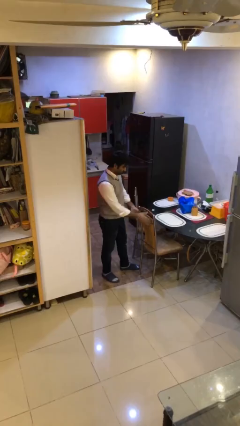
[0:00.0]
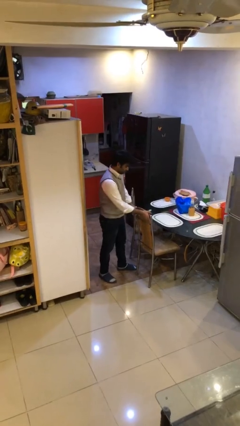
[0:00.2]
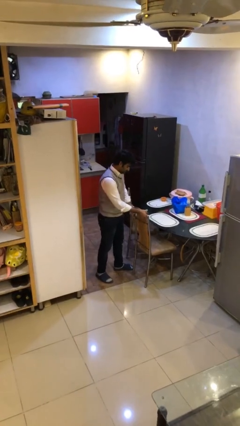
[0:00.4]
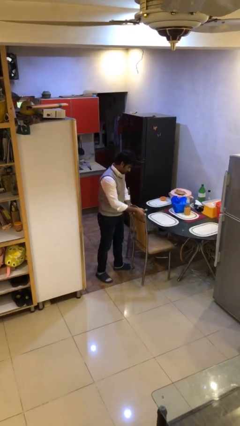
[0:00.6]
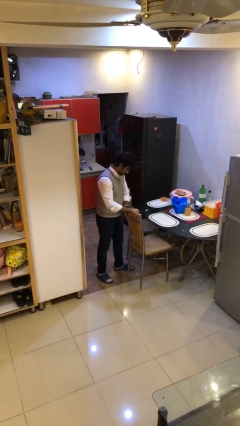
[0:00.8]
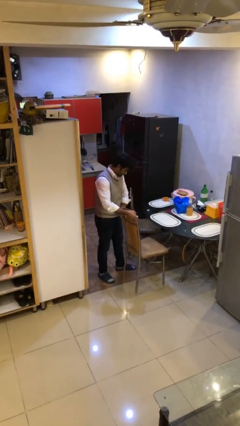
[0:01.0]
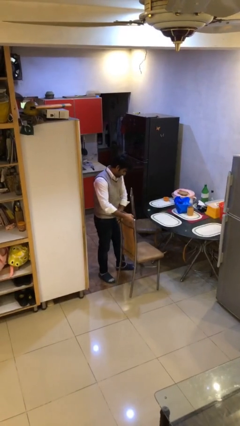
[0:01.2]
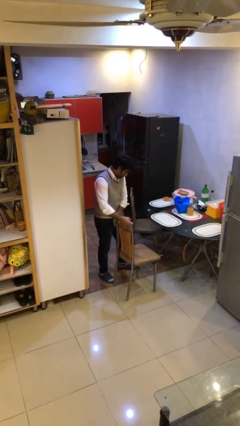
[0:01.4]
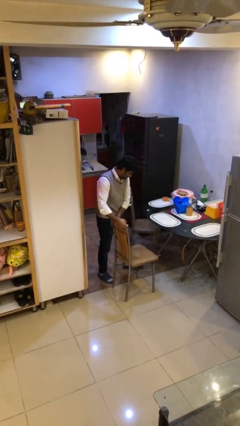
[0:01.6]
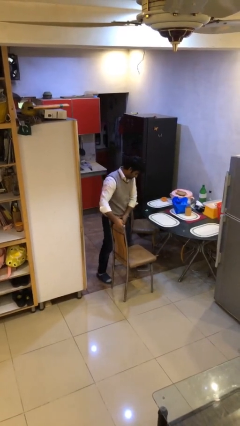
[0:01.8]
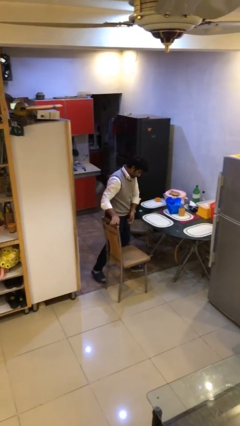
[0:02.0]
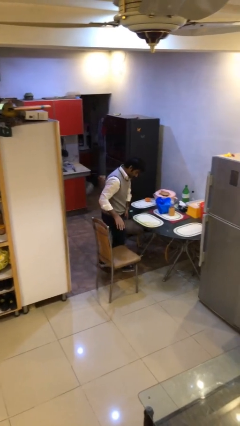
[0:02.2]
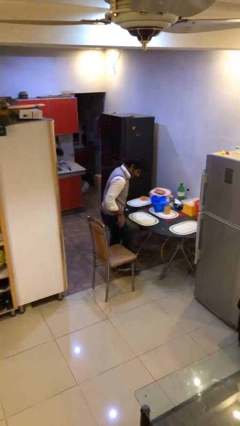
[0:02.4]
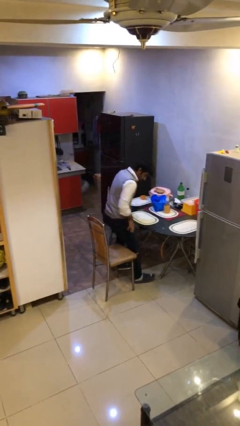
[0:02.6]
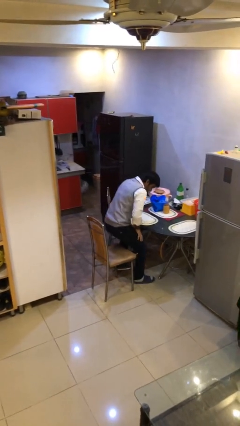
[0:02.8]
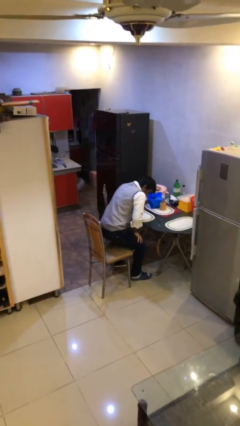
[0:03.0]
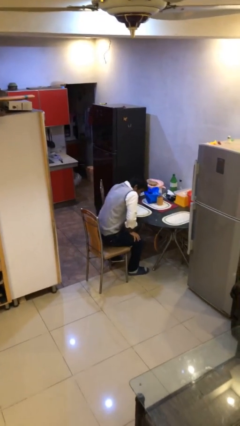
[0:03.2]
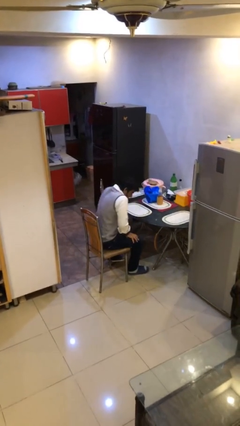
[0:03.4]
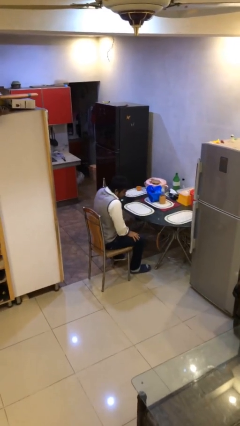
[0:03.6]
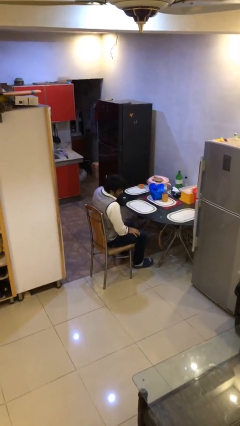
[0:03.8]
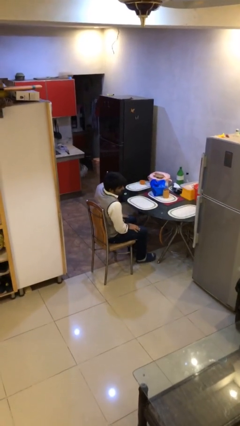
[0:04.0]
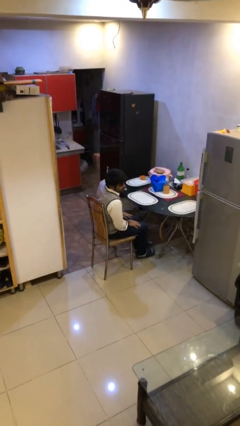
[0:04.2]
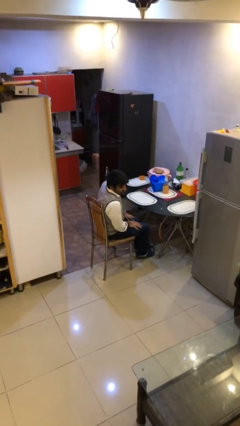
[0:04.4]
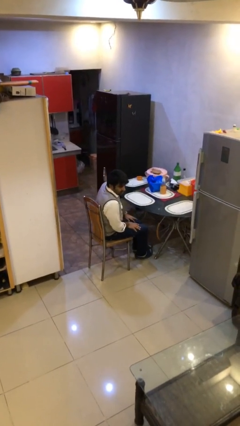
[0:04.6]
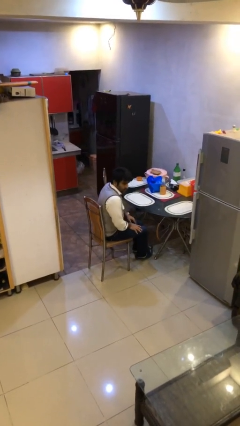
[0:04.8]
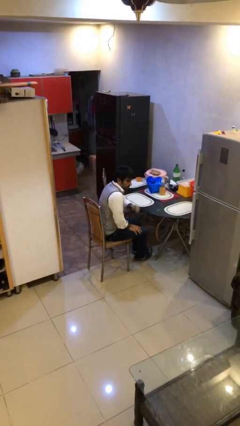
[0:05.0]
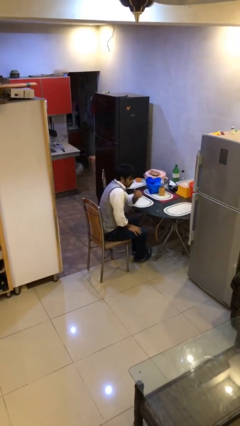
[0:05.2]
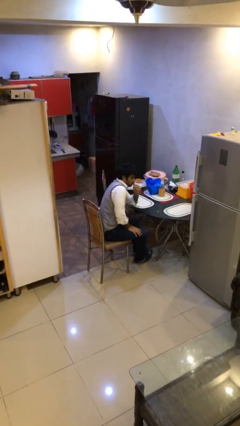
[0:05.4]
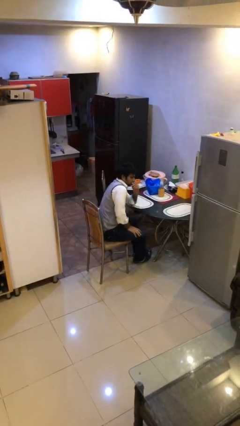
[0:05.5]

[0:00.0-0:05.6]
person sits down

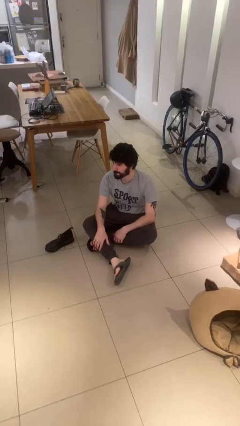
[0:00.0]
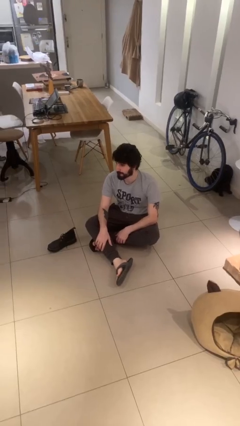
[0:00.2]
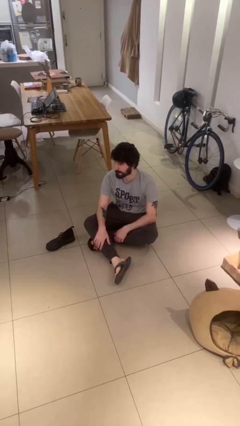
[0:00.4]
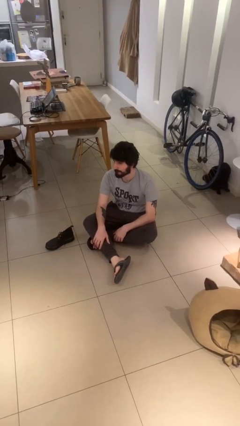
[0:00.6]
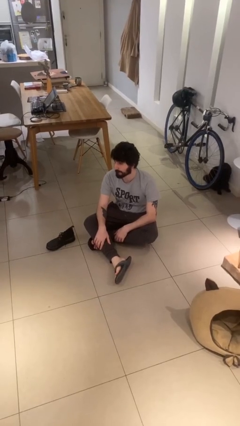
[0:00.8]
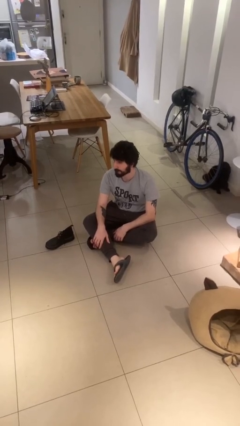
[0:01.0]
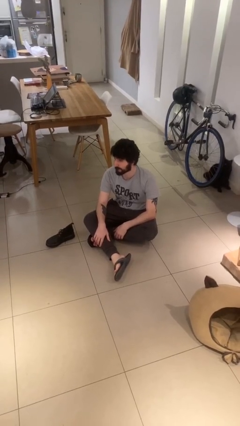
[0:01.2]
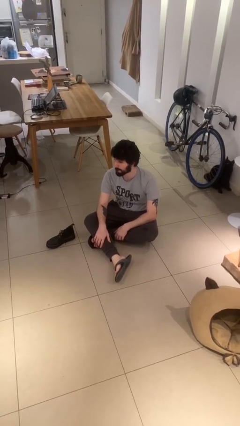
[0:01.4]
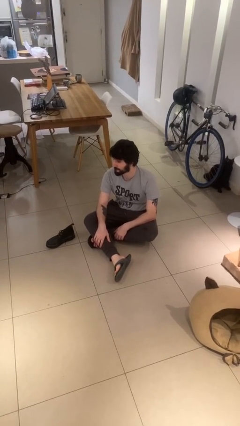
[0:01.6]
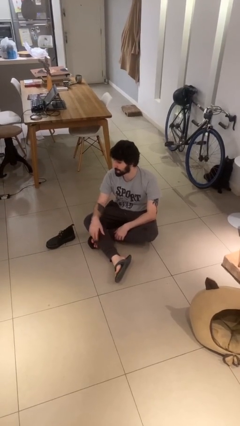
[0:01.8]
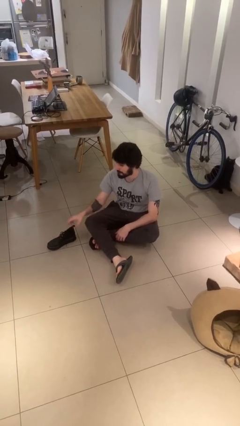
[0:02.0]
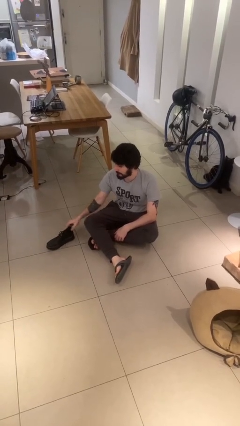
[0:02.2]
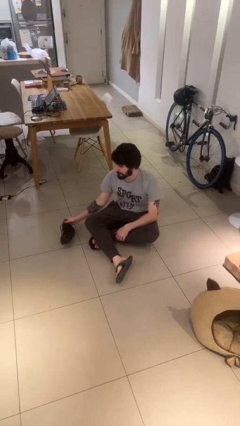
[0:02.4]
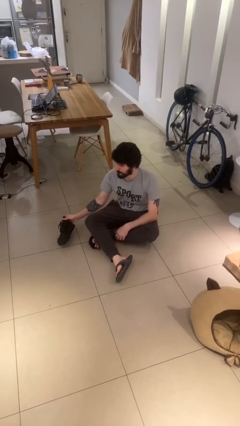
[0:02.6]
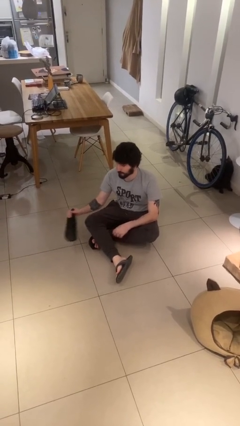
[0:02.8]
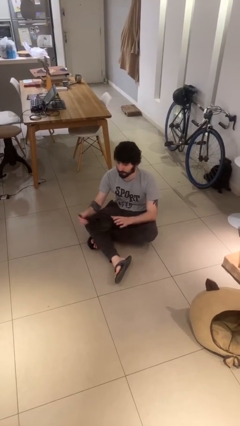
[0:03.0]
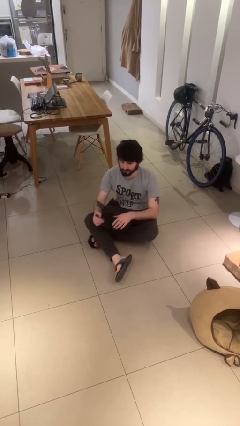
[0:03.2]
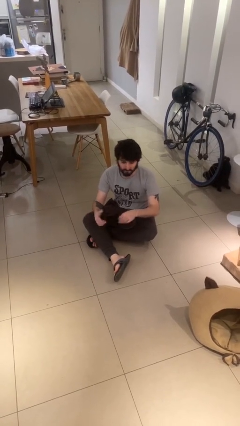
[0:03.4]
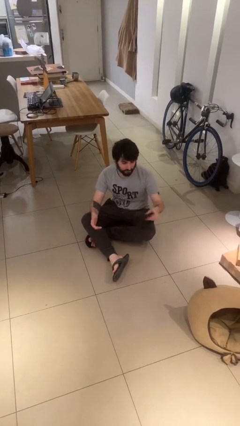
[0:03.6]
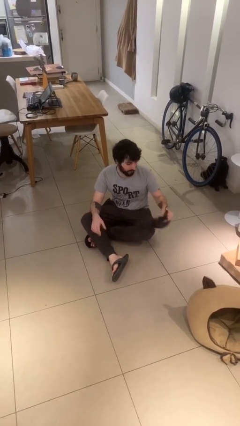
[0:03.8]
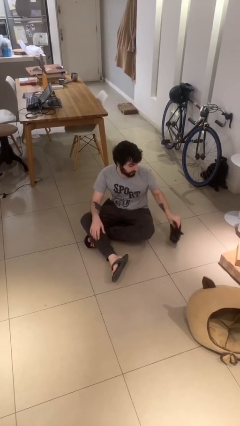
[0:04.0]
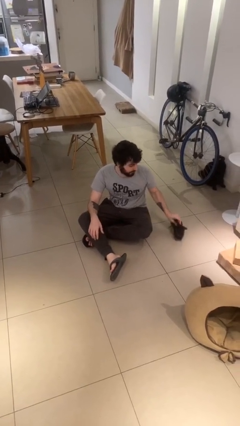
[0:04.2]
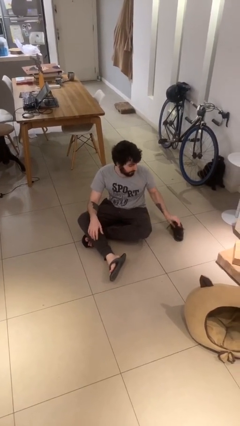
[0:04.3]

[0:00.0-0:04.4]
person picks up object from floor

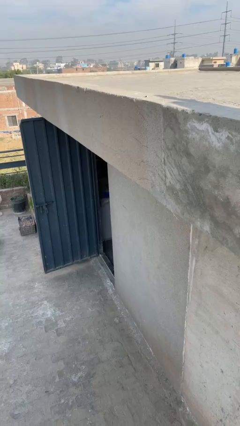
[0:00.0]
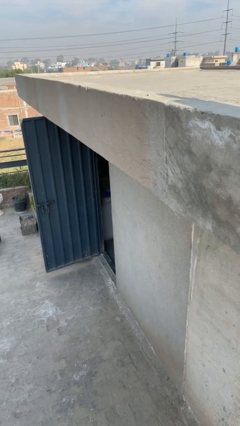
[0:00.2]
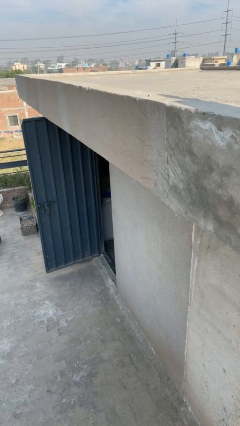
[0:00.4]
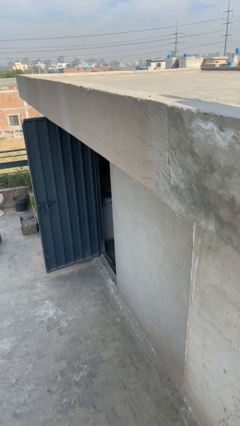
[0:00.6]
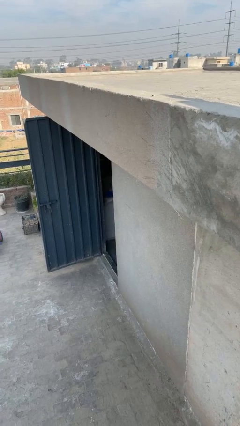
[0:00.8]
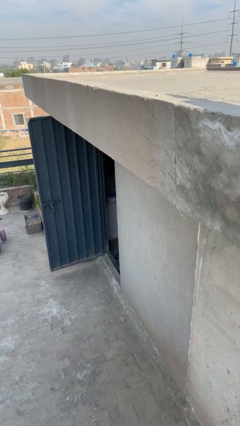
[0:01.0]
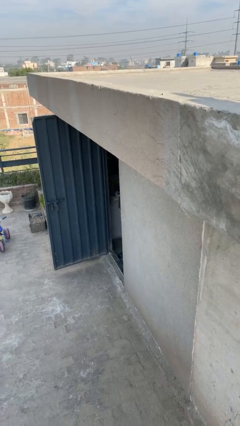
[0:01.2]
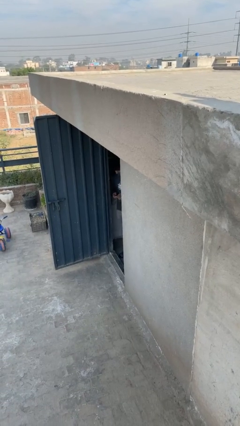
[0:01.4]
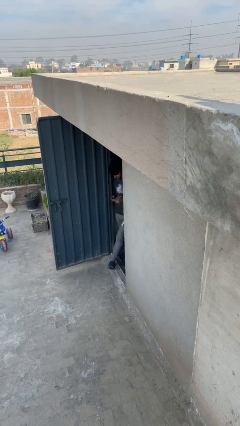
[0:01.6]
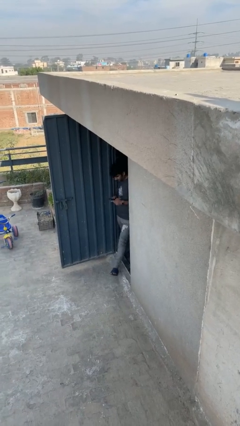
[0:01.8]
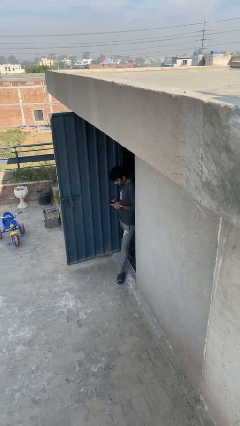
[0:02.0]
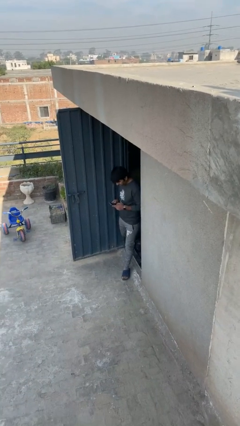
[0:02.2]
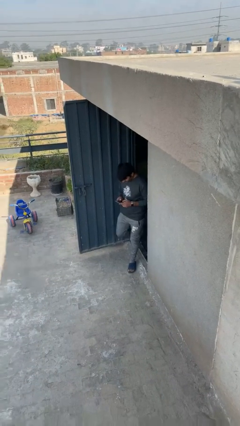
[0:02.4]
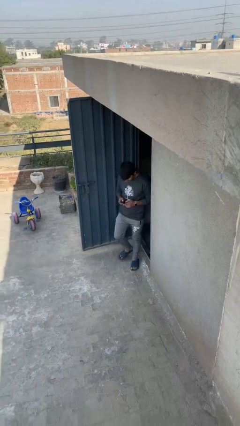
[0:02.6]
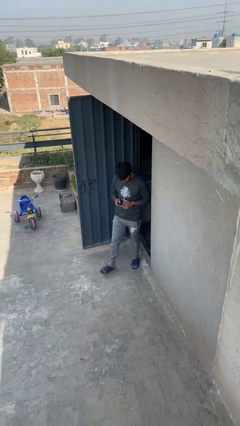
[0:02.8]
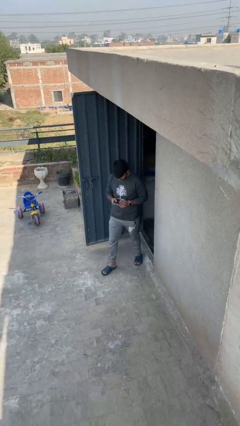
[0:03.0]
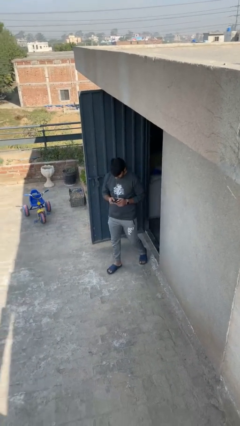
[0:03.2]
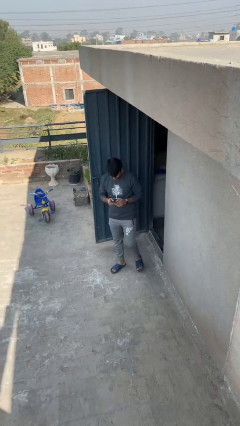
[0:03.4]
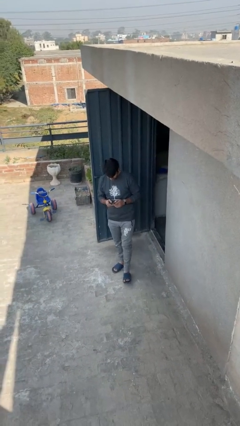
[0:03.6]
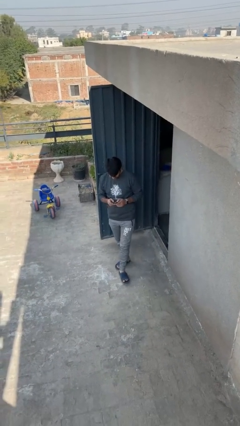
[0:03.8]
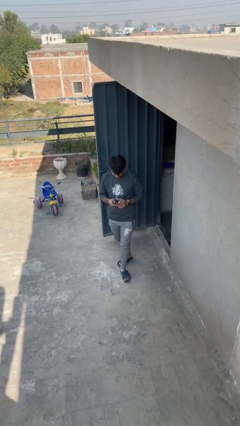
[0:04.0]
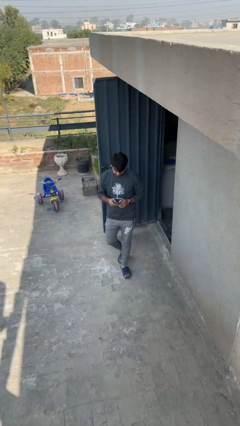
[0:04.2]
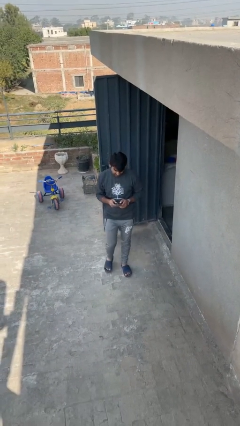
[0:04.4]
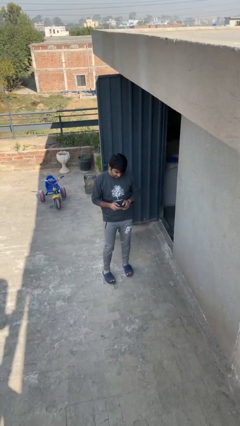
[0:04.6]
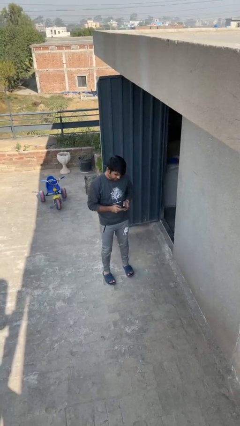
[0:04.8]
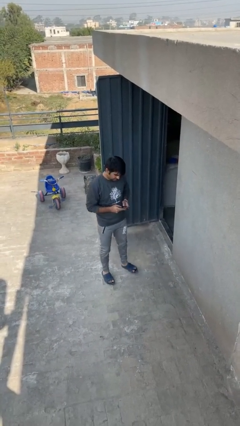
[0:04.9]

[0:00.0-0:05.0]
person enters scene through structure

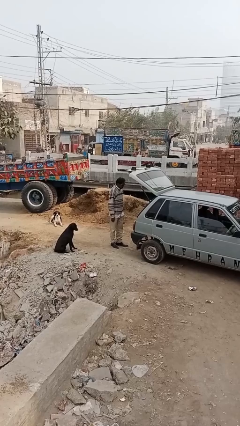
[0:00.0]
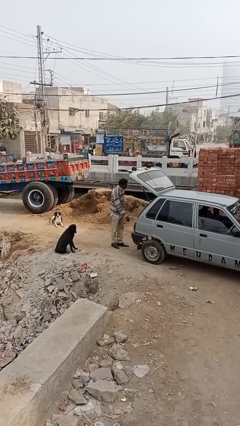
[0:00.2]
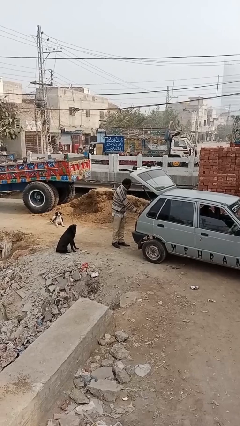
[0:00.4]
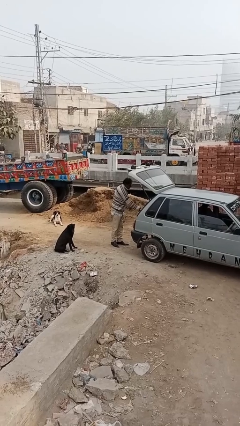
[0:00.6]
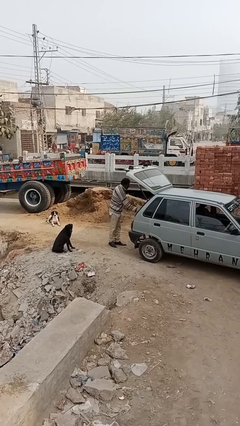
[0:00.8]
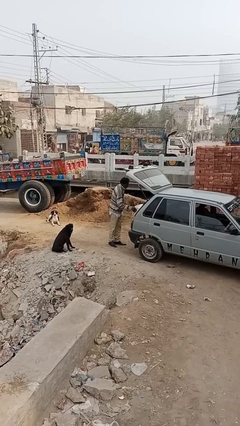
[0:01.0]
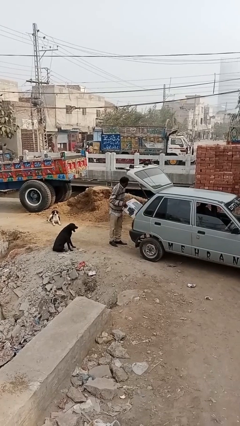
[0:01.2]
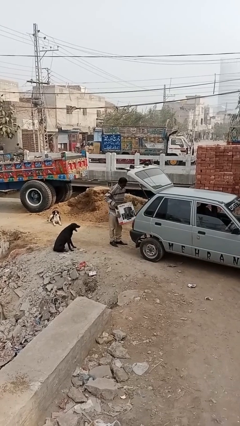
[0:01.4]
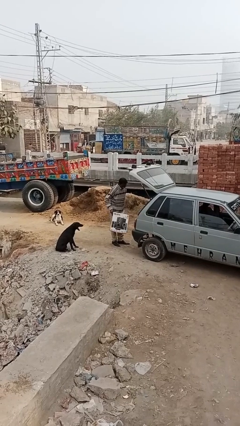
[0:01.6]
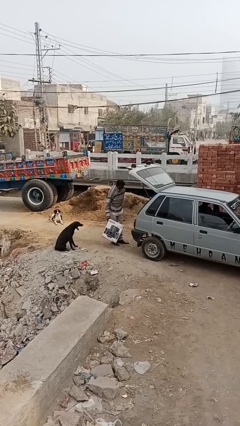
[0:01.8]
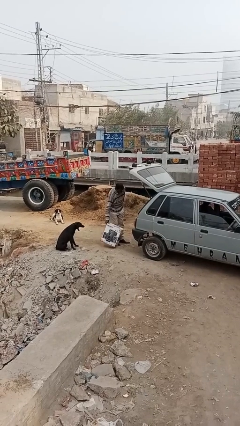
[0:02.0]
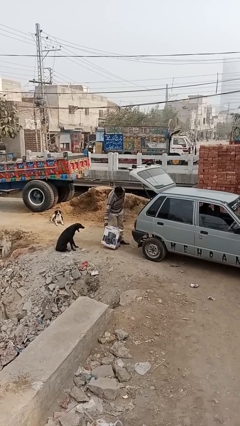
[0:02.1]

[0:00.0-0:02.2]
person unloads car

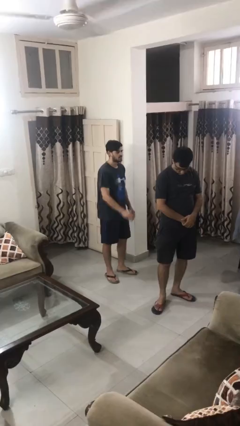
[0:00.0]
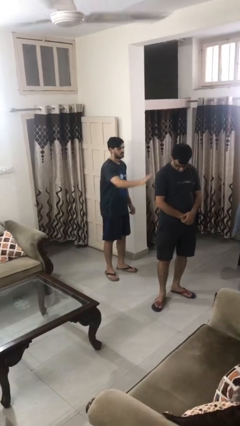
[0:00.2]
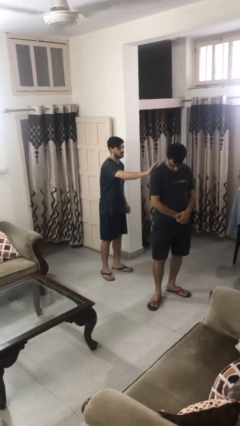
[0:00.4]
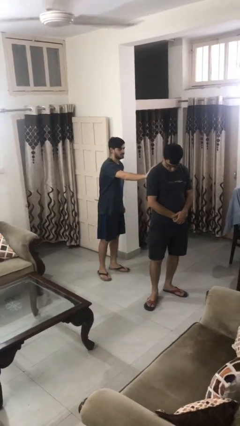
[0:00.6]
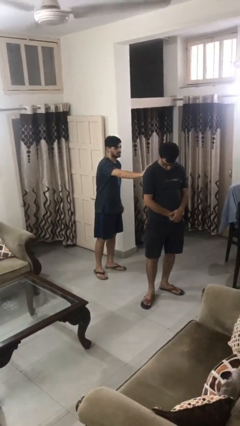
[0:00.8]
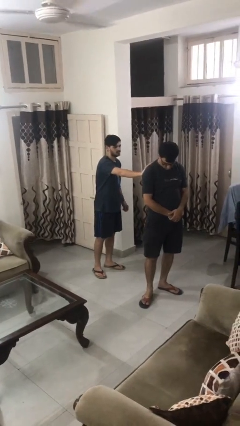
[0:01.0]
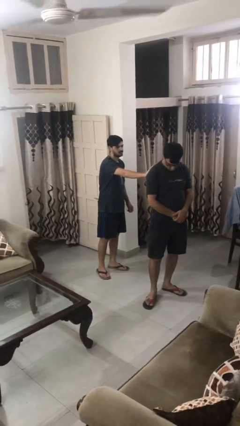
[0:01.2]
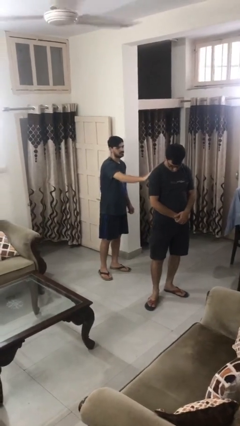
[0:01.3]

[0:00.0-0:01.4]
person touches back of person
